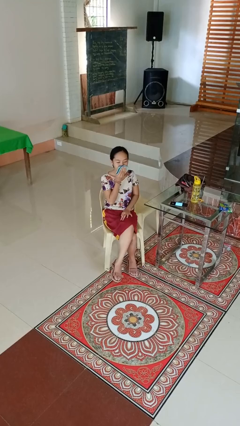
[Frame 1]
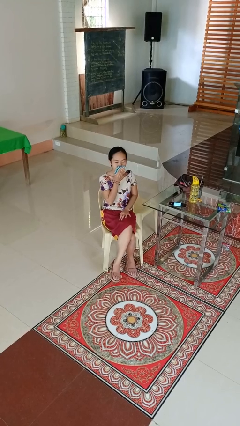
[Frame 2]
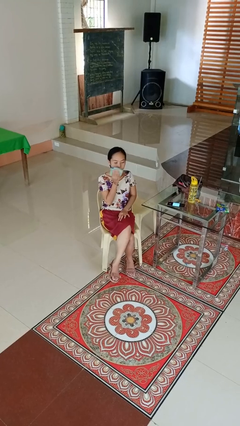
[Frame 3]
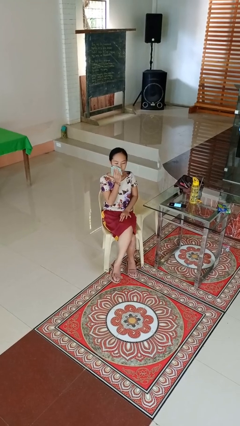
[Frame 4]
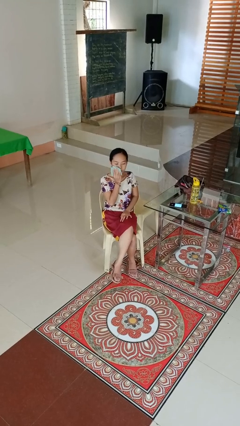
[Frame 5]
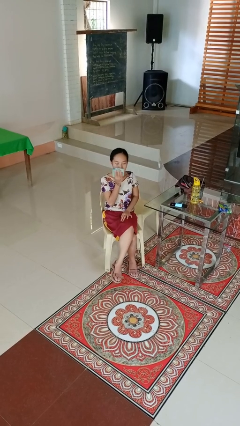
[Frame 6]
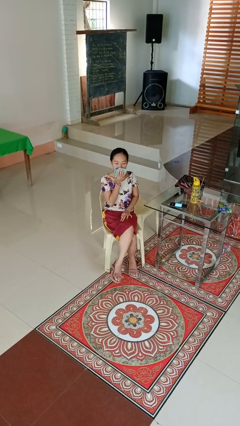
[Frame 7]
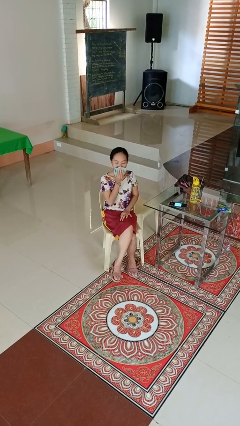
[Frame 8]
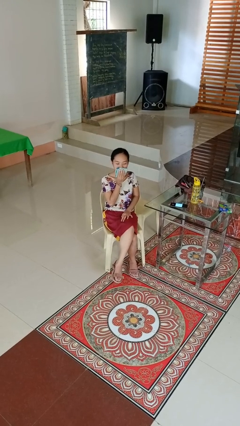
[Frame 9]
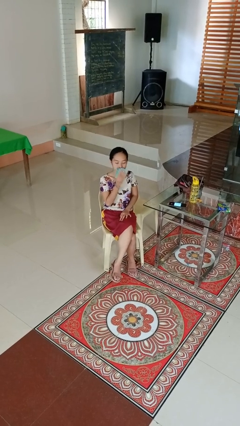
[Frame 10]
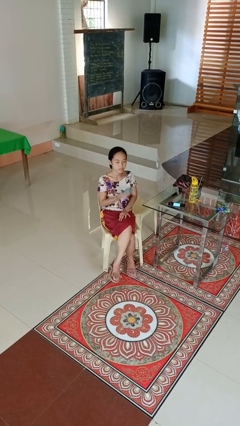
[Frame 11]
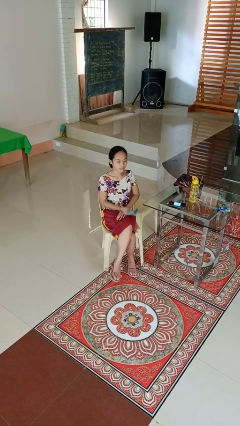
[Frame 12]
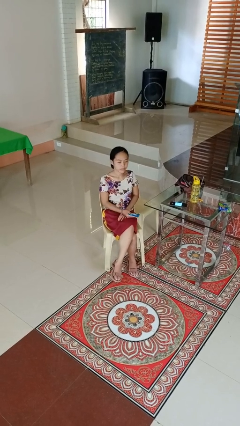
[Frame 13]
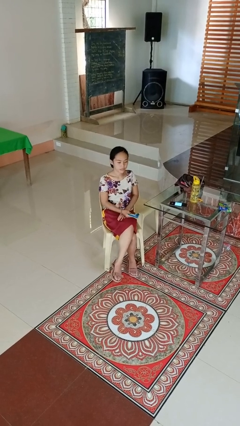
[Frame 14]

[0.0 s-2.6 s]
person wipes mouth with napkin

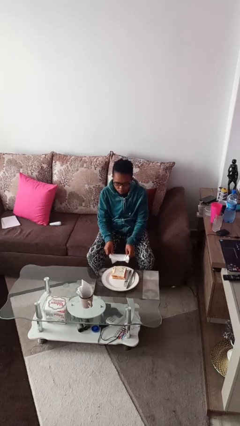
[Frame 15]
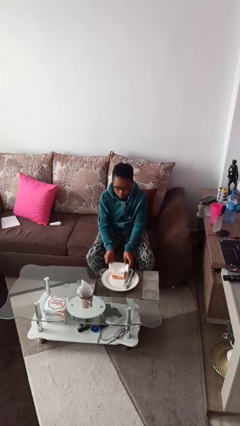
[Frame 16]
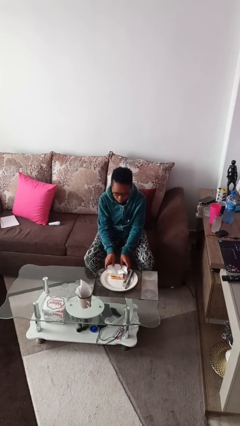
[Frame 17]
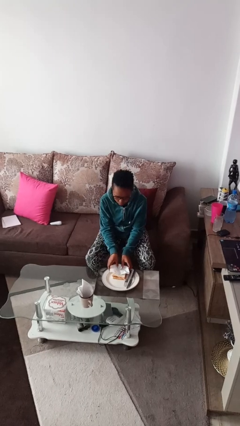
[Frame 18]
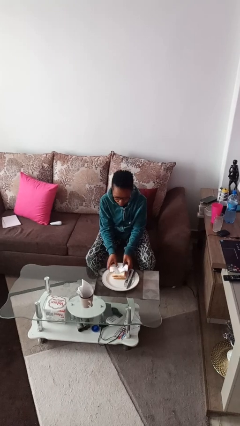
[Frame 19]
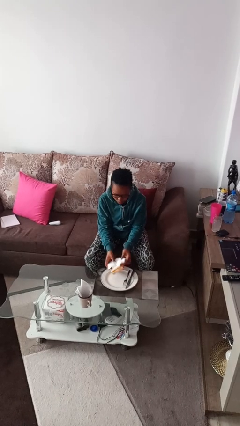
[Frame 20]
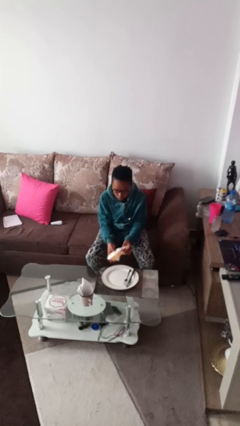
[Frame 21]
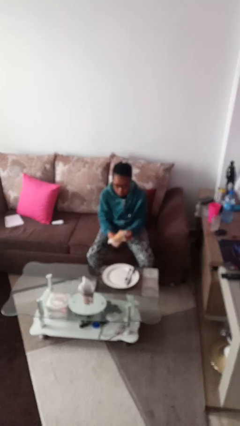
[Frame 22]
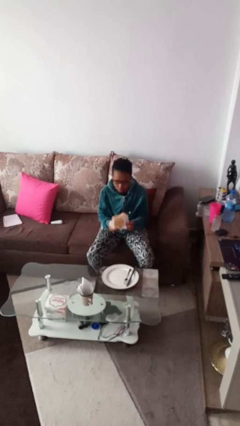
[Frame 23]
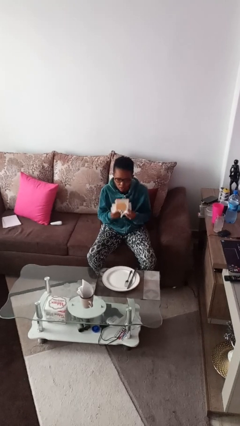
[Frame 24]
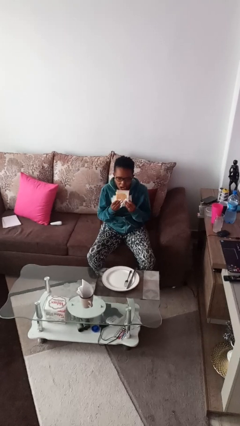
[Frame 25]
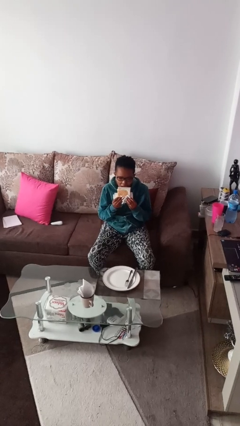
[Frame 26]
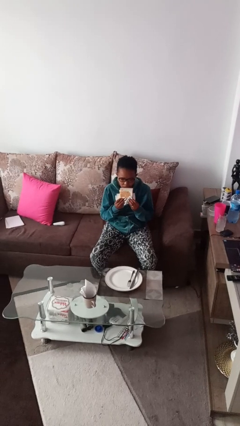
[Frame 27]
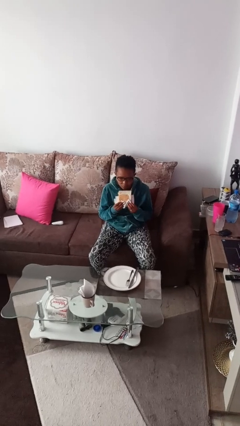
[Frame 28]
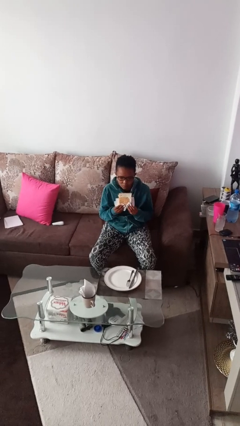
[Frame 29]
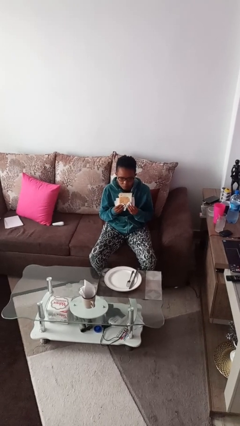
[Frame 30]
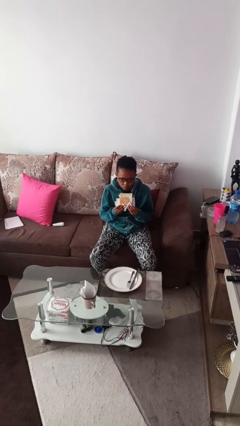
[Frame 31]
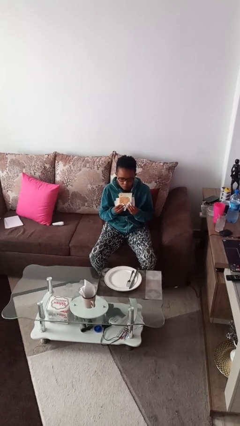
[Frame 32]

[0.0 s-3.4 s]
person eats with hands

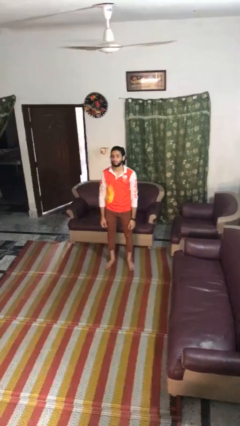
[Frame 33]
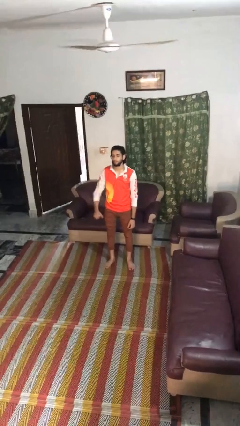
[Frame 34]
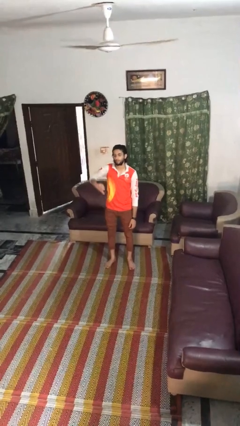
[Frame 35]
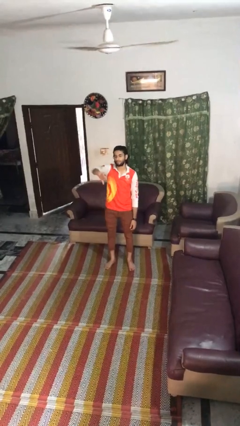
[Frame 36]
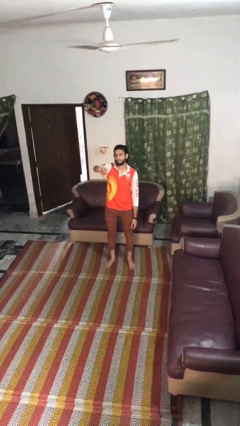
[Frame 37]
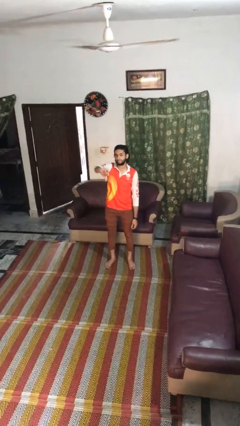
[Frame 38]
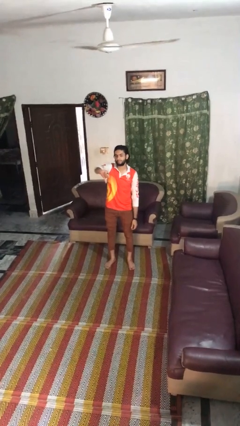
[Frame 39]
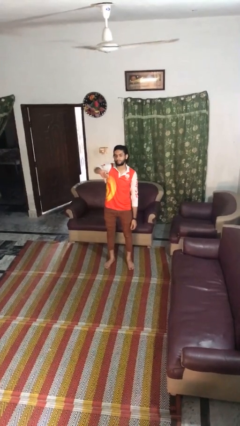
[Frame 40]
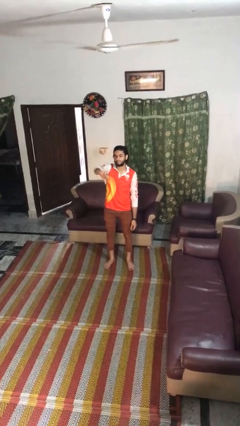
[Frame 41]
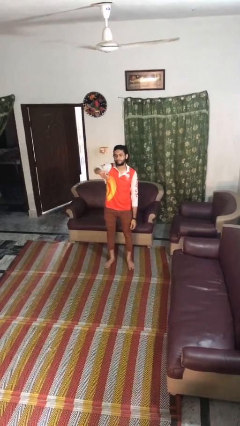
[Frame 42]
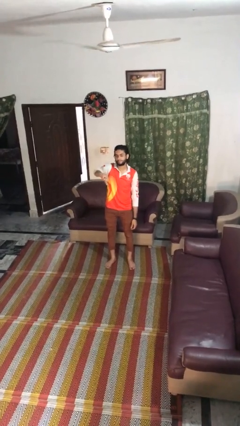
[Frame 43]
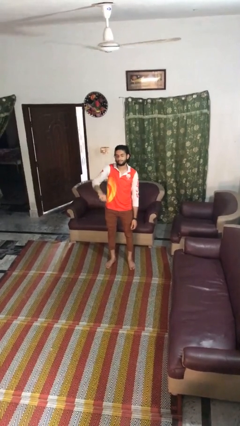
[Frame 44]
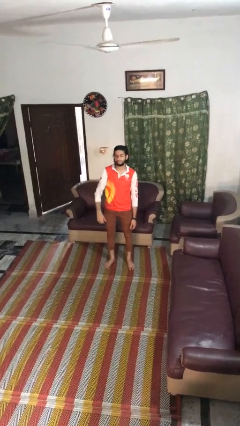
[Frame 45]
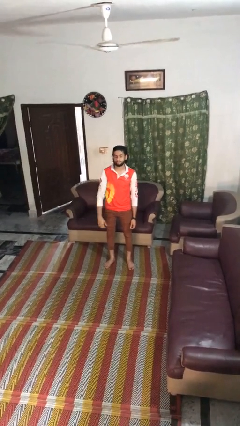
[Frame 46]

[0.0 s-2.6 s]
person gestures thumbs down

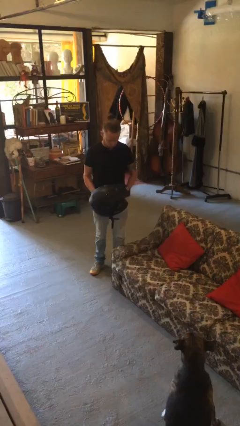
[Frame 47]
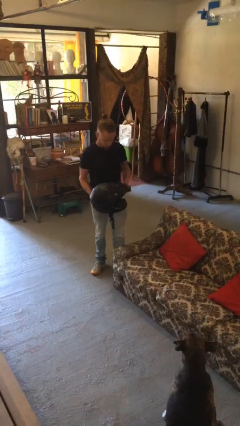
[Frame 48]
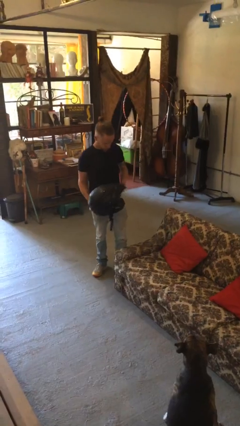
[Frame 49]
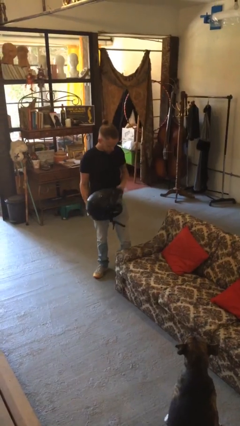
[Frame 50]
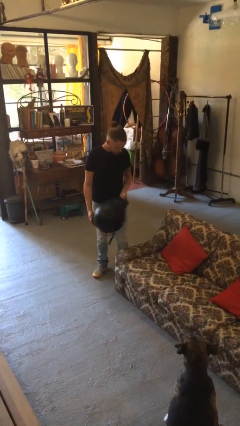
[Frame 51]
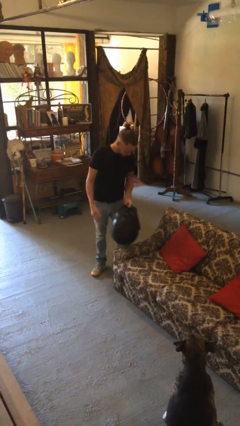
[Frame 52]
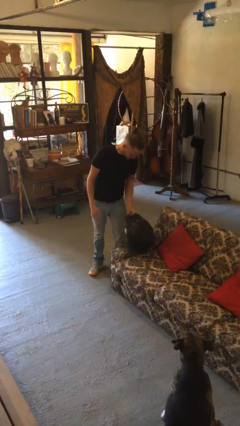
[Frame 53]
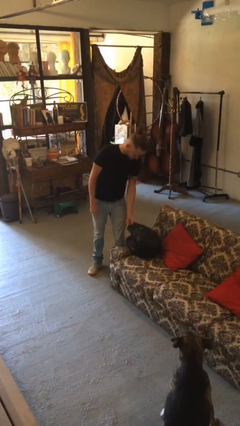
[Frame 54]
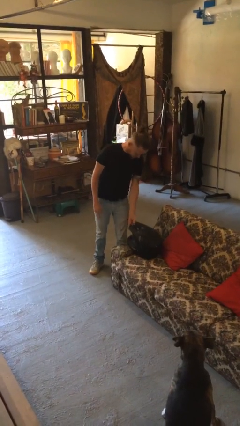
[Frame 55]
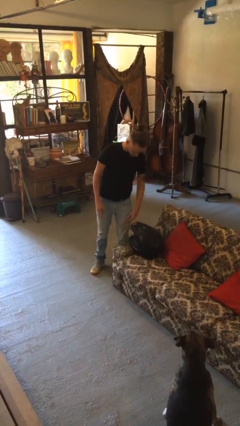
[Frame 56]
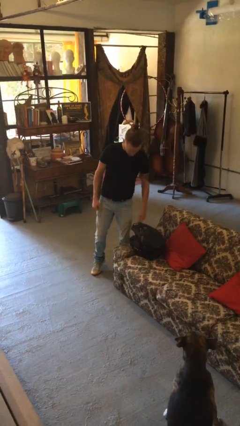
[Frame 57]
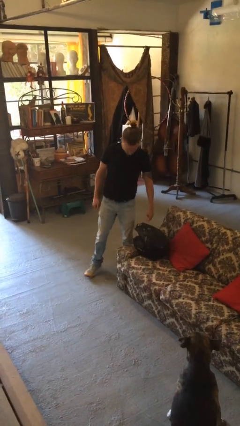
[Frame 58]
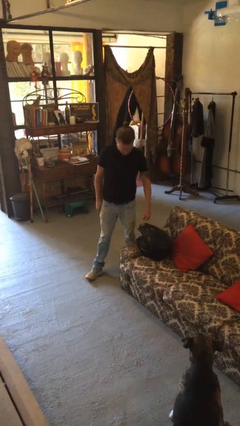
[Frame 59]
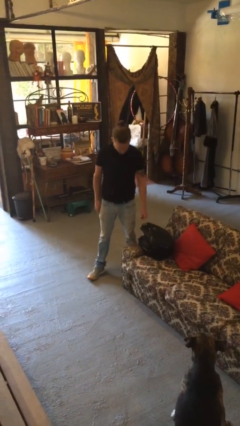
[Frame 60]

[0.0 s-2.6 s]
person puts down object on couch

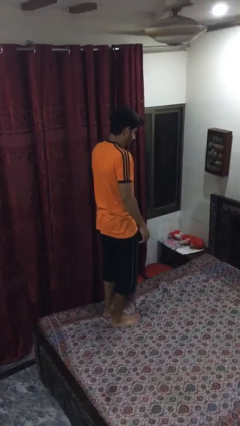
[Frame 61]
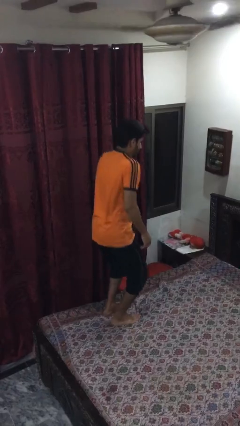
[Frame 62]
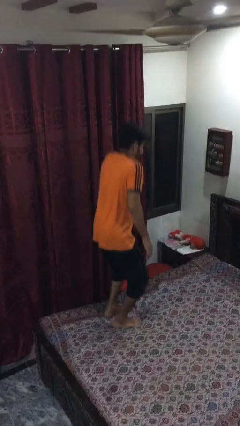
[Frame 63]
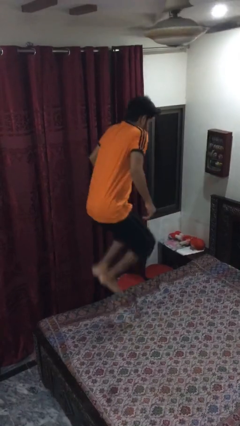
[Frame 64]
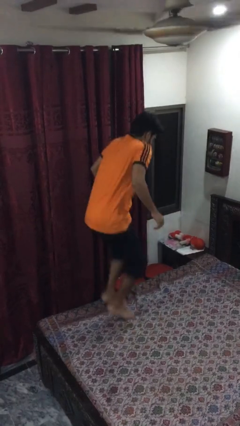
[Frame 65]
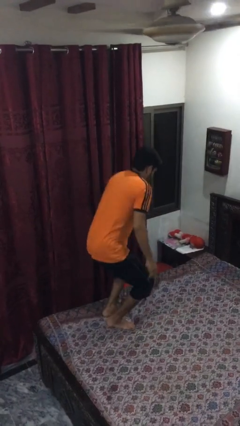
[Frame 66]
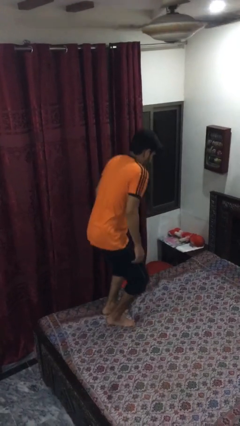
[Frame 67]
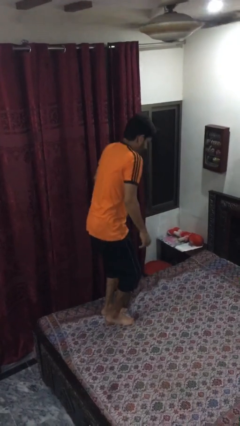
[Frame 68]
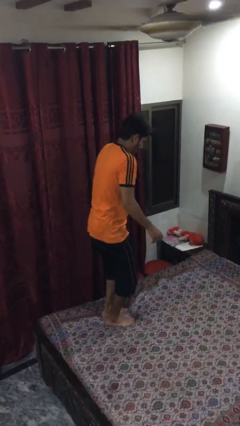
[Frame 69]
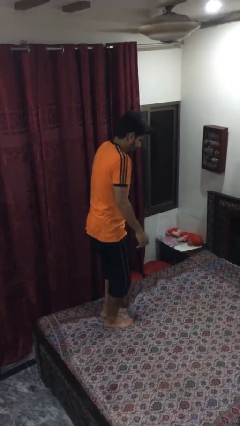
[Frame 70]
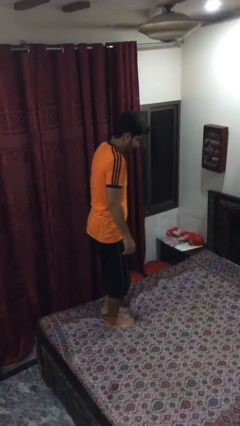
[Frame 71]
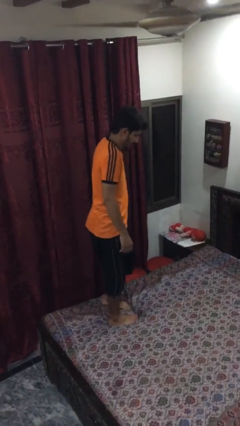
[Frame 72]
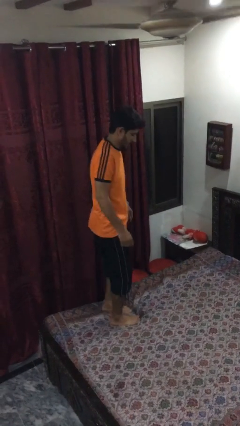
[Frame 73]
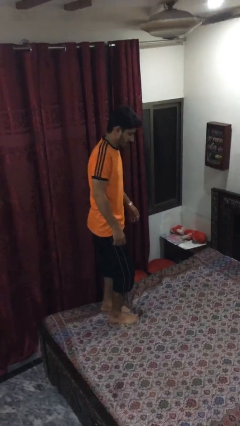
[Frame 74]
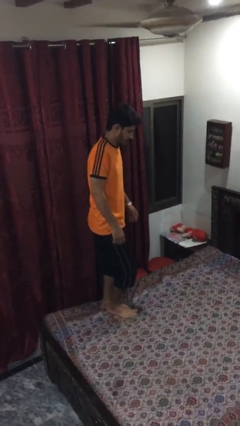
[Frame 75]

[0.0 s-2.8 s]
person jumps on bed

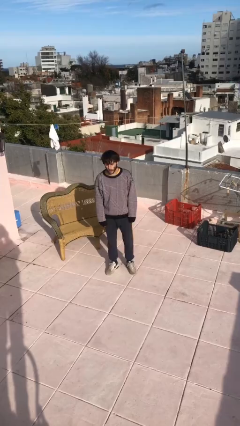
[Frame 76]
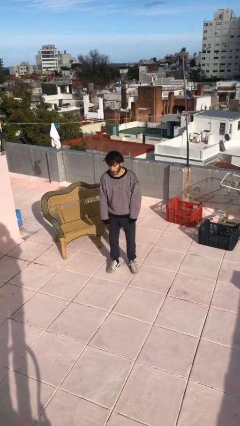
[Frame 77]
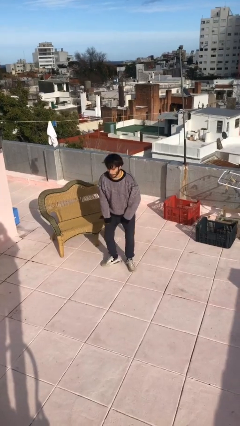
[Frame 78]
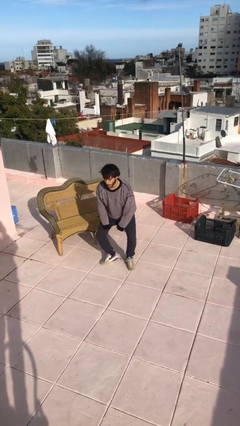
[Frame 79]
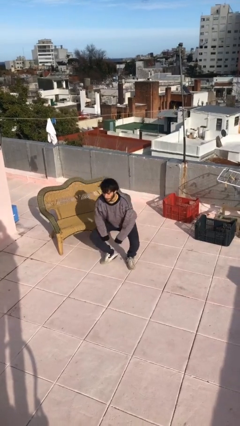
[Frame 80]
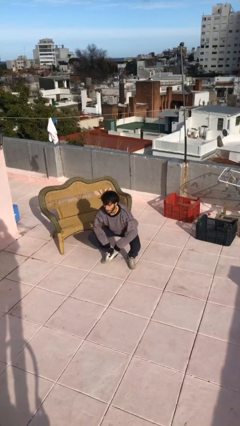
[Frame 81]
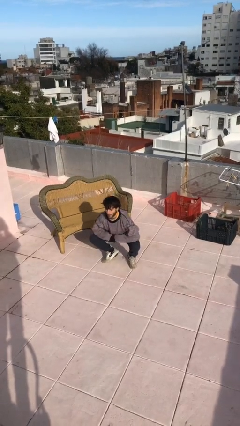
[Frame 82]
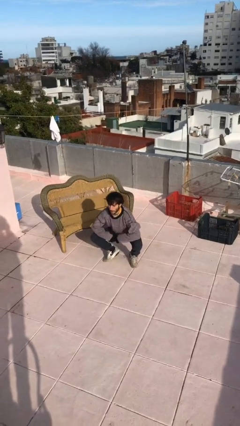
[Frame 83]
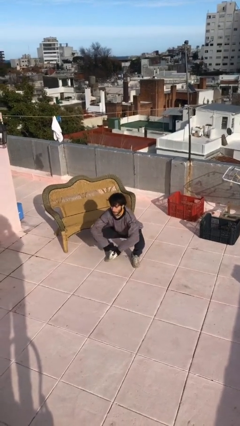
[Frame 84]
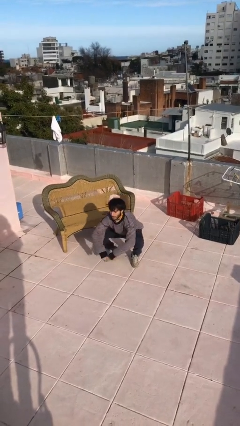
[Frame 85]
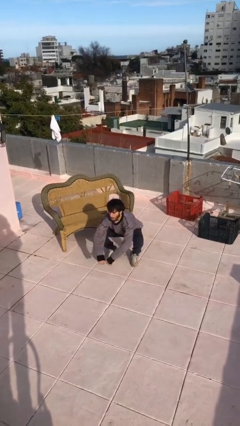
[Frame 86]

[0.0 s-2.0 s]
person squats

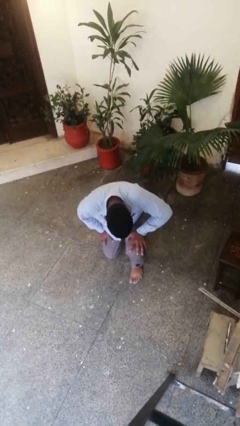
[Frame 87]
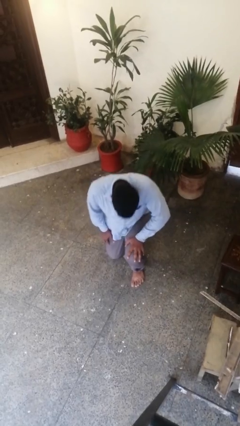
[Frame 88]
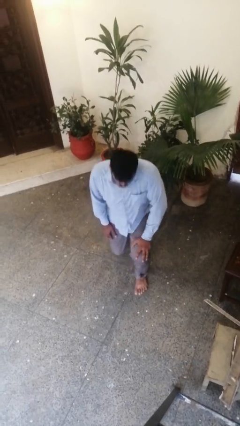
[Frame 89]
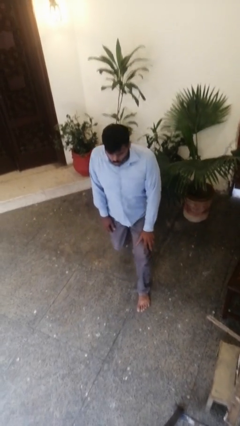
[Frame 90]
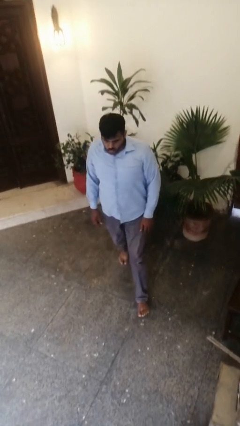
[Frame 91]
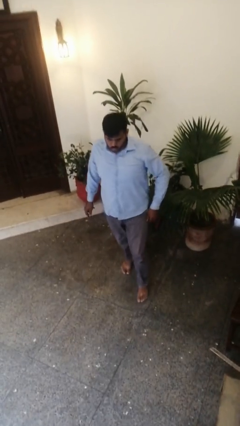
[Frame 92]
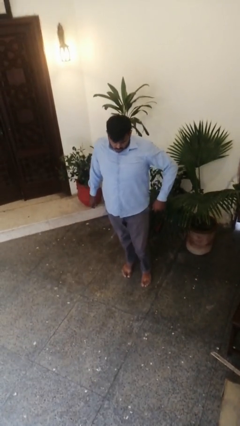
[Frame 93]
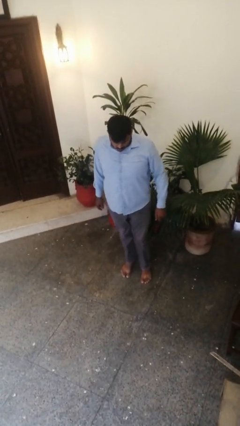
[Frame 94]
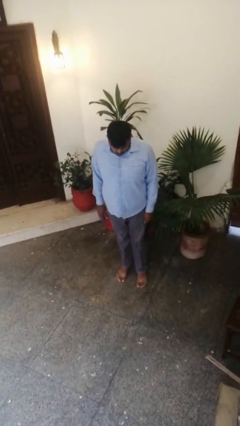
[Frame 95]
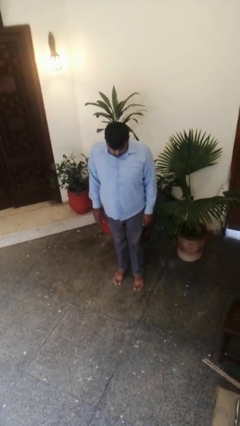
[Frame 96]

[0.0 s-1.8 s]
person stands up from floor
